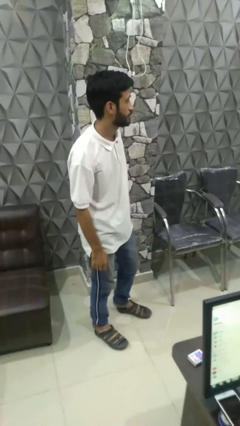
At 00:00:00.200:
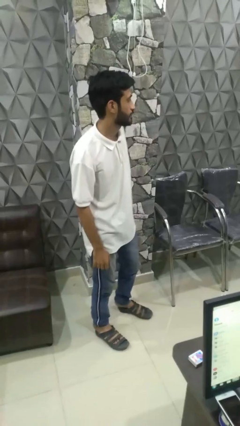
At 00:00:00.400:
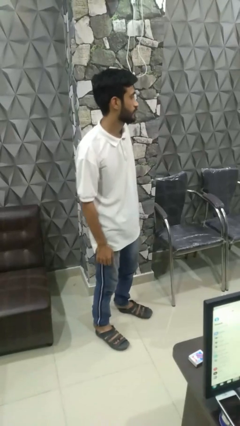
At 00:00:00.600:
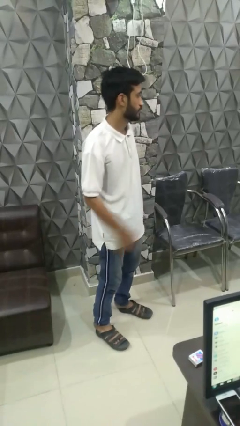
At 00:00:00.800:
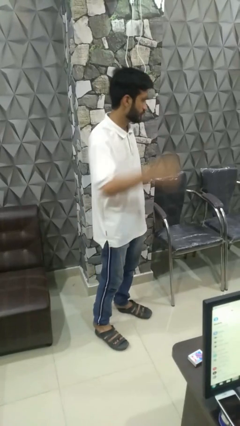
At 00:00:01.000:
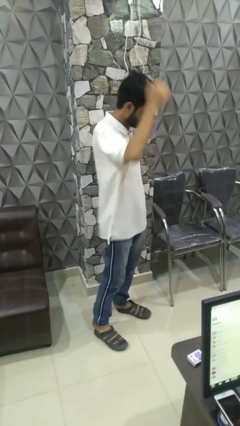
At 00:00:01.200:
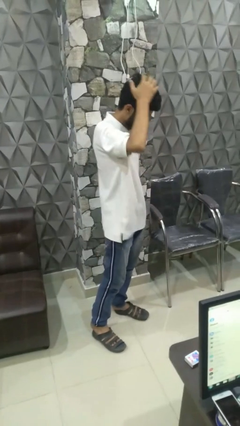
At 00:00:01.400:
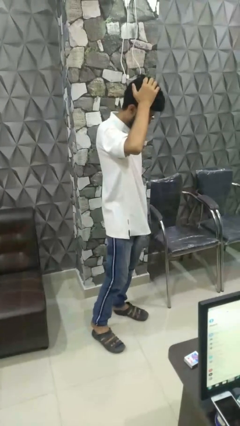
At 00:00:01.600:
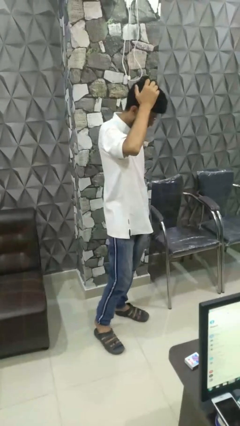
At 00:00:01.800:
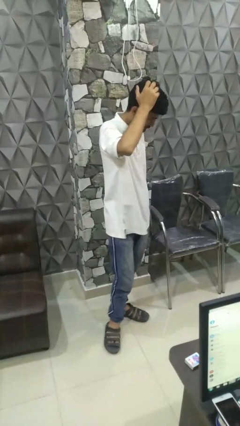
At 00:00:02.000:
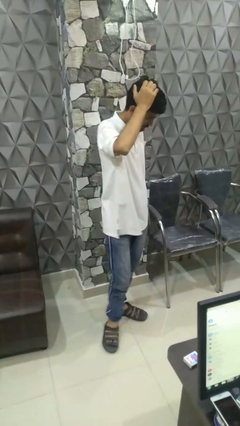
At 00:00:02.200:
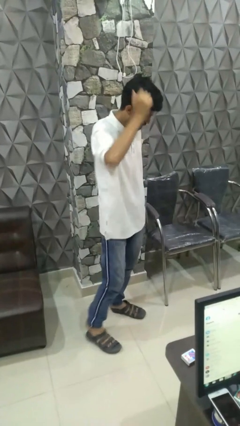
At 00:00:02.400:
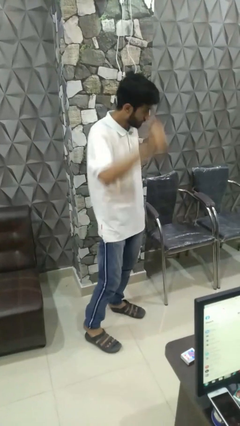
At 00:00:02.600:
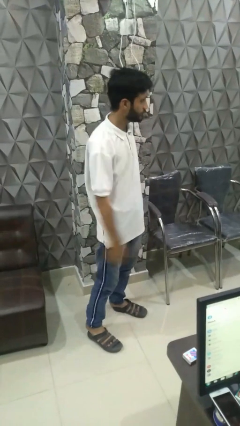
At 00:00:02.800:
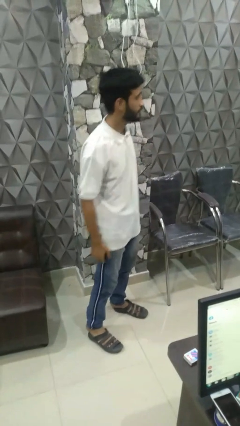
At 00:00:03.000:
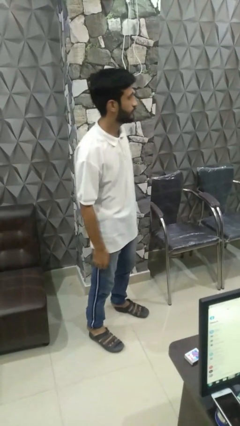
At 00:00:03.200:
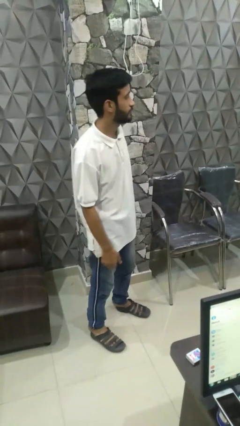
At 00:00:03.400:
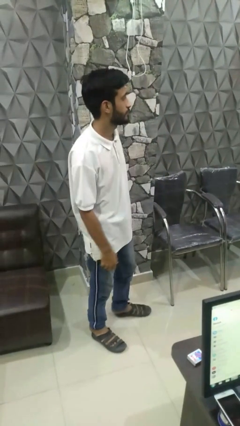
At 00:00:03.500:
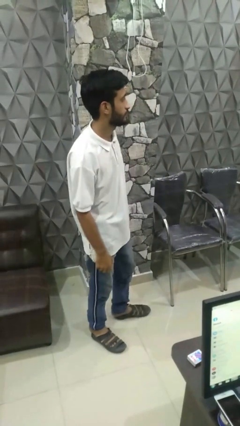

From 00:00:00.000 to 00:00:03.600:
person scratches face

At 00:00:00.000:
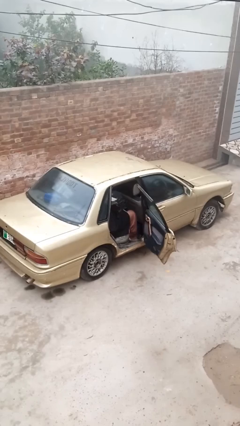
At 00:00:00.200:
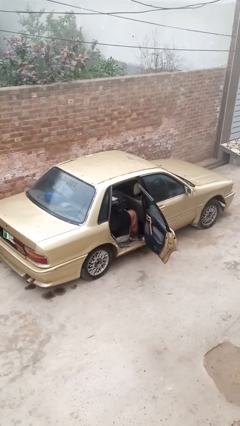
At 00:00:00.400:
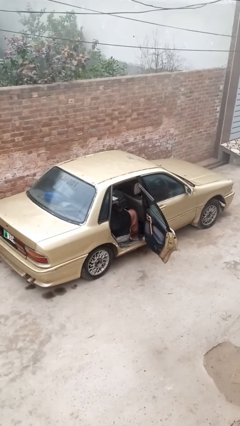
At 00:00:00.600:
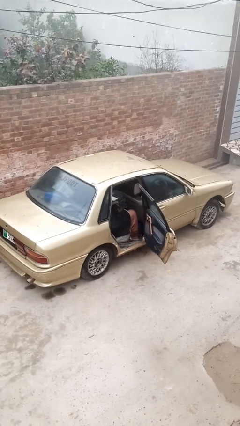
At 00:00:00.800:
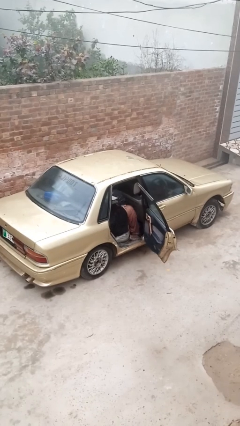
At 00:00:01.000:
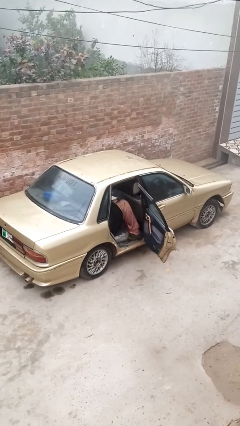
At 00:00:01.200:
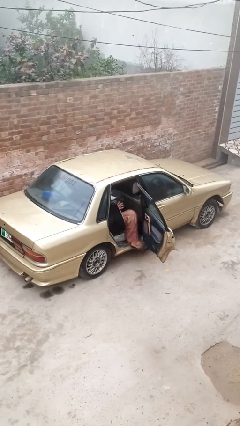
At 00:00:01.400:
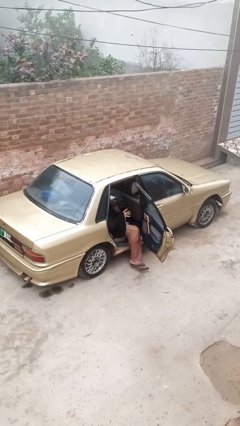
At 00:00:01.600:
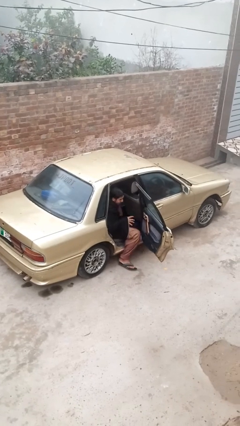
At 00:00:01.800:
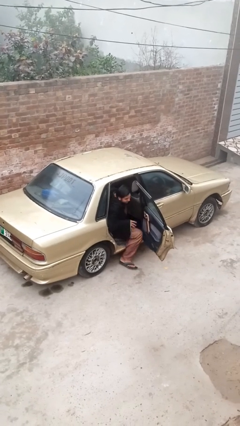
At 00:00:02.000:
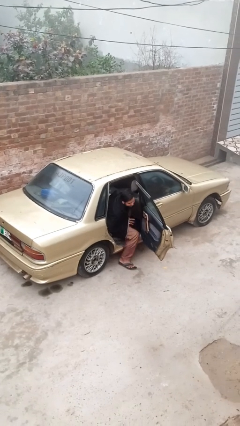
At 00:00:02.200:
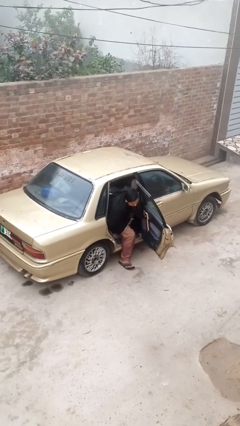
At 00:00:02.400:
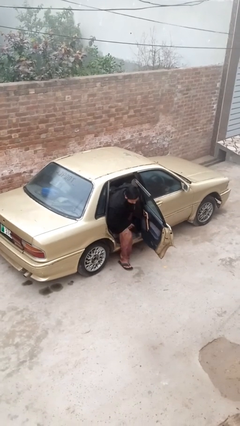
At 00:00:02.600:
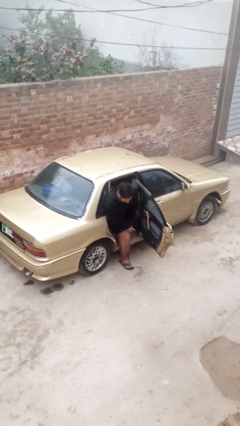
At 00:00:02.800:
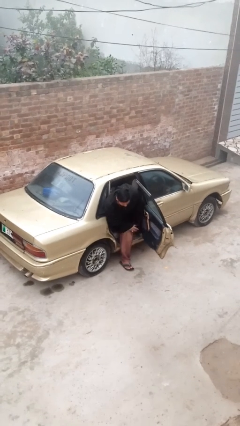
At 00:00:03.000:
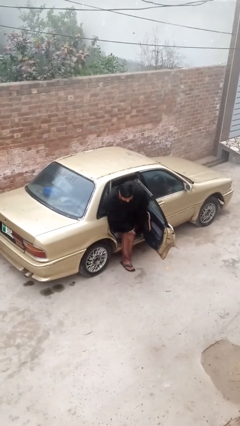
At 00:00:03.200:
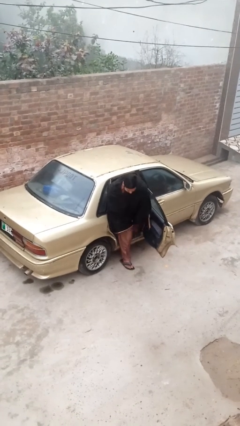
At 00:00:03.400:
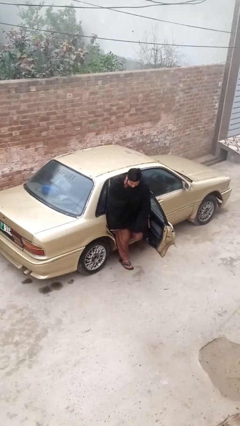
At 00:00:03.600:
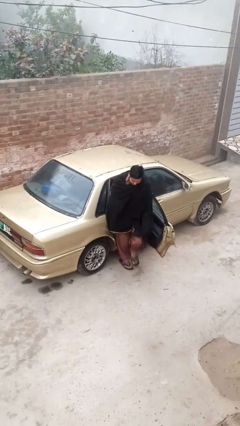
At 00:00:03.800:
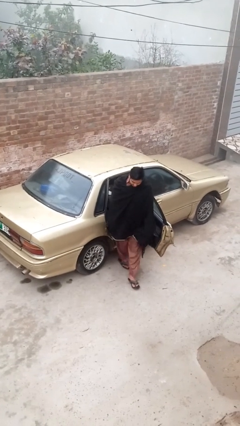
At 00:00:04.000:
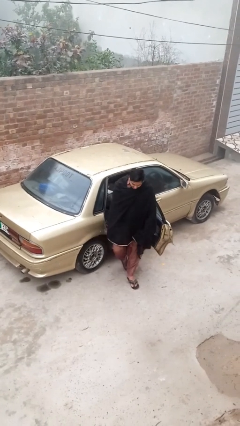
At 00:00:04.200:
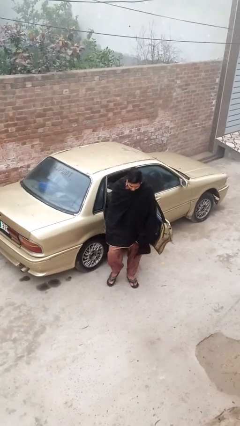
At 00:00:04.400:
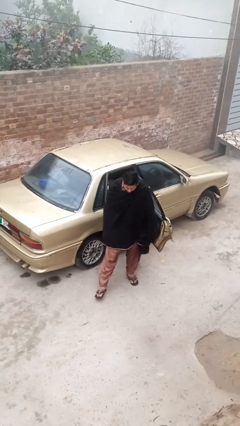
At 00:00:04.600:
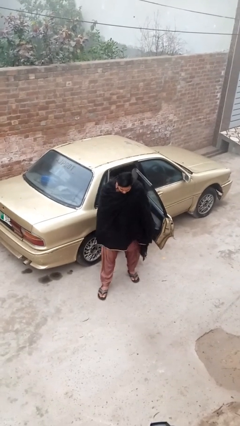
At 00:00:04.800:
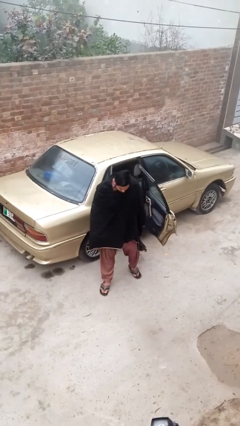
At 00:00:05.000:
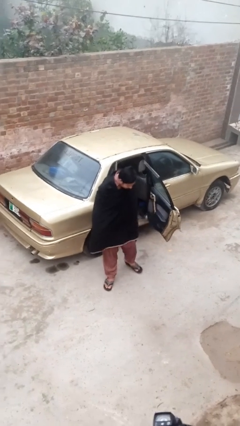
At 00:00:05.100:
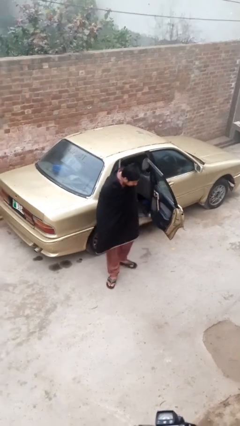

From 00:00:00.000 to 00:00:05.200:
person exits car

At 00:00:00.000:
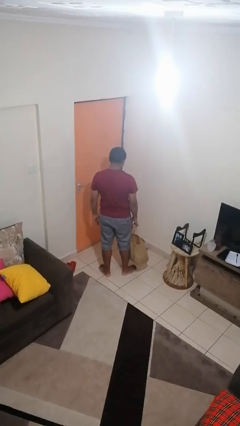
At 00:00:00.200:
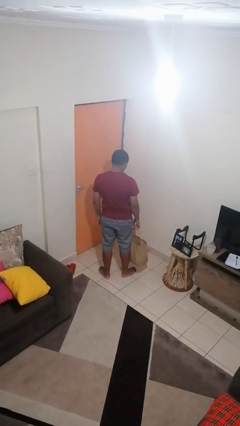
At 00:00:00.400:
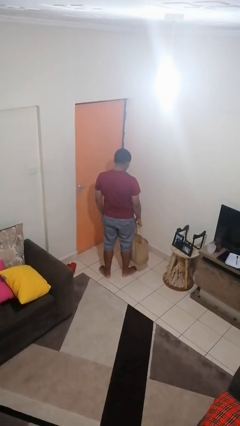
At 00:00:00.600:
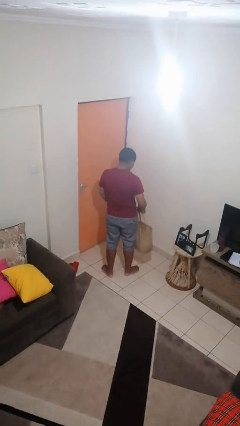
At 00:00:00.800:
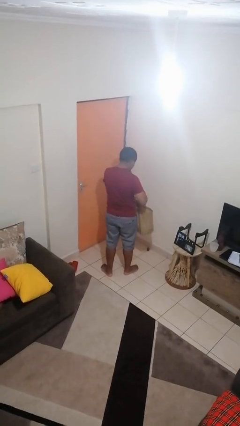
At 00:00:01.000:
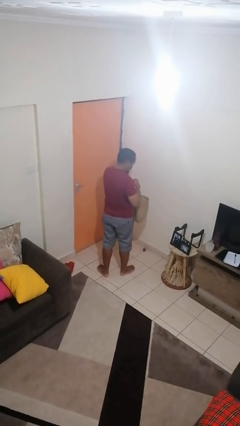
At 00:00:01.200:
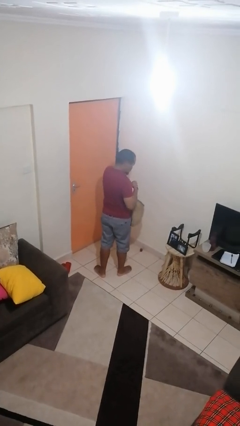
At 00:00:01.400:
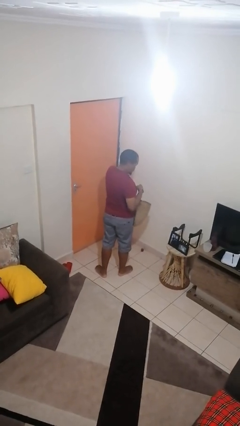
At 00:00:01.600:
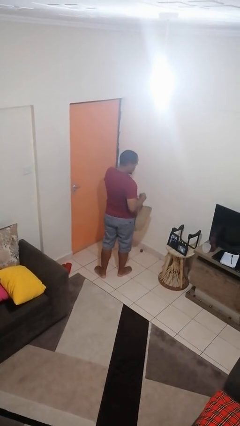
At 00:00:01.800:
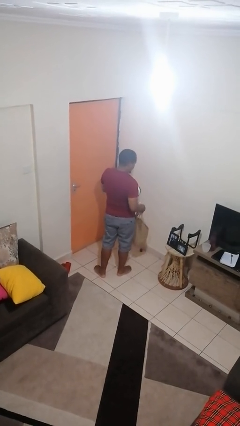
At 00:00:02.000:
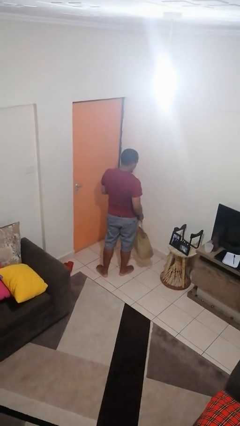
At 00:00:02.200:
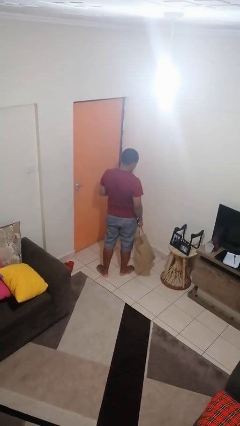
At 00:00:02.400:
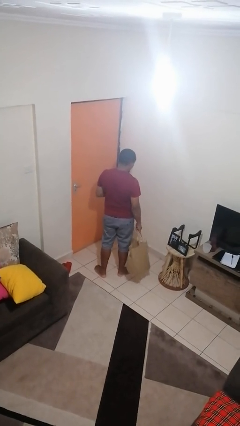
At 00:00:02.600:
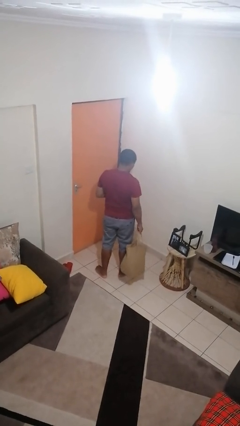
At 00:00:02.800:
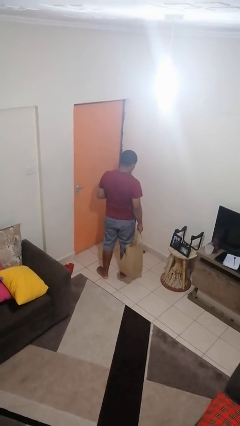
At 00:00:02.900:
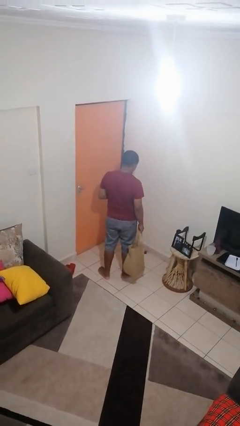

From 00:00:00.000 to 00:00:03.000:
person takes object from bag

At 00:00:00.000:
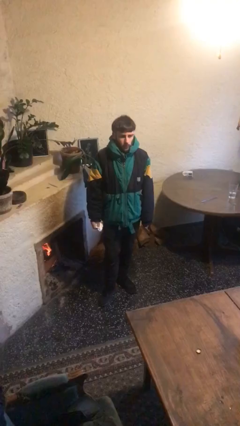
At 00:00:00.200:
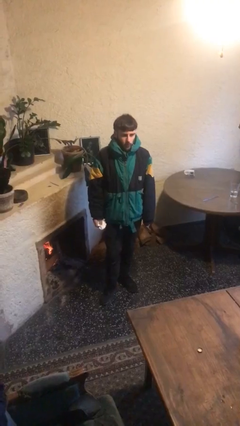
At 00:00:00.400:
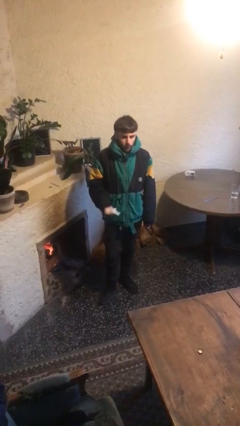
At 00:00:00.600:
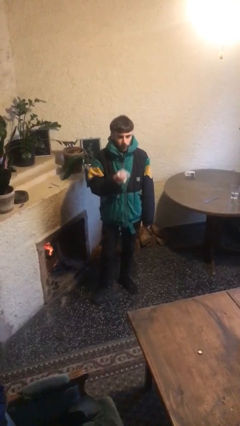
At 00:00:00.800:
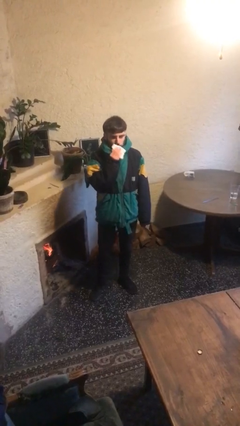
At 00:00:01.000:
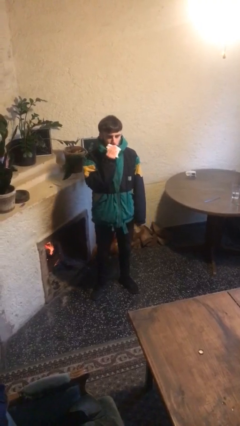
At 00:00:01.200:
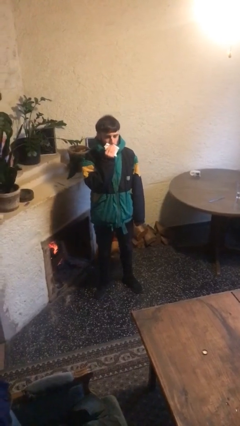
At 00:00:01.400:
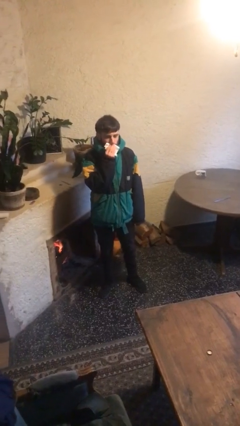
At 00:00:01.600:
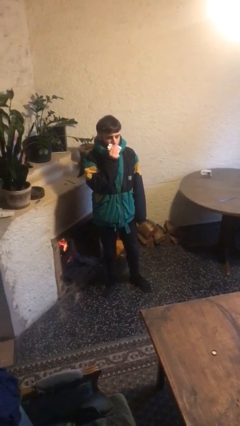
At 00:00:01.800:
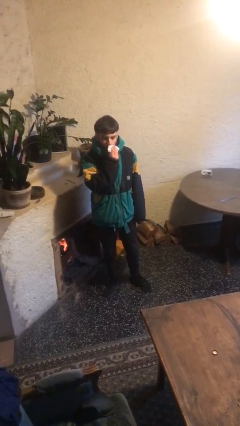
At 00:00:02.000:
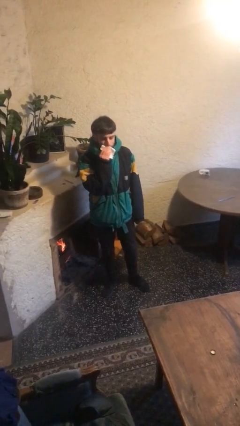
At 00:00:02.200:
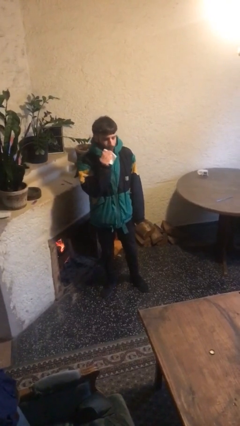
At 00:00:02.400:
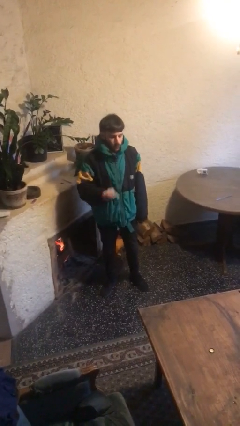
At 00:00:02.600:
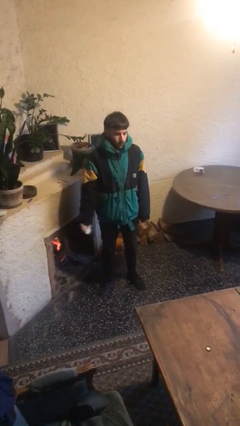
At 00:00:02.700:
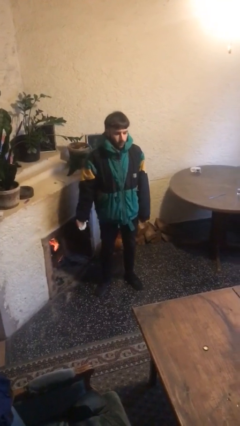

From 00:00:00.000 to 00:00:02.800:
person wipes mouth with napkin

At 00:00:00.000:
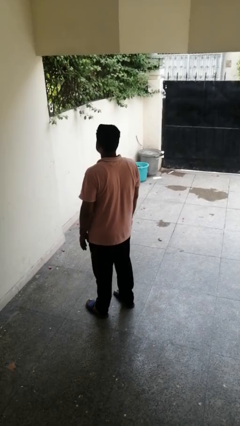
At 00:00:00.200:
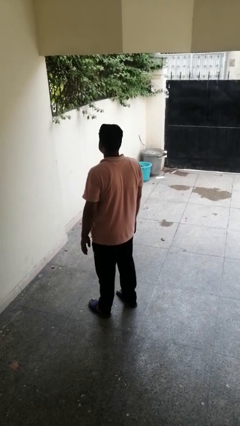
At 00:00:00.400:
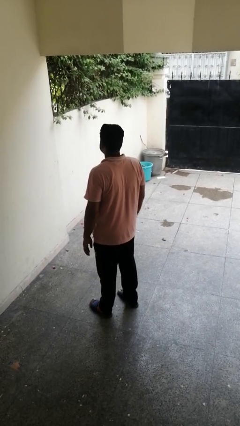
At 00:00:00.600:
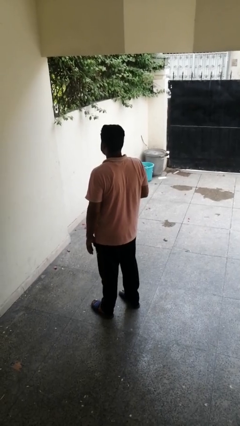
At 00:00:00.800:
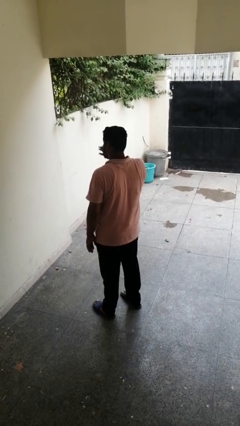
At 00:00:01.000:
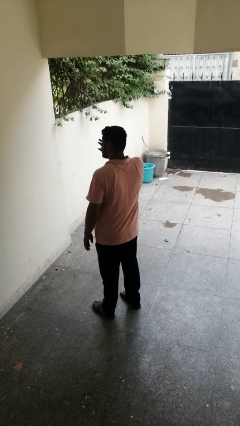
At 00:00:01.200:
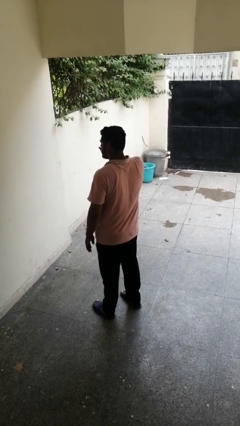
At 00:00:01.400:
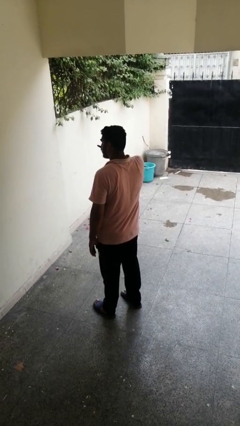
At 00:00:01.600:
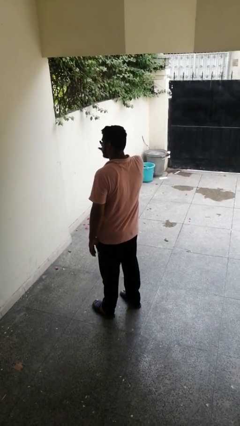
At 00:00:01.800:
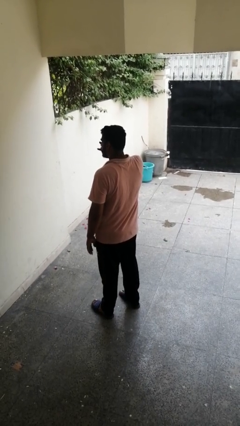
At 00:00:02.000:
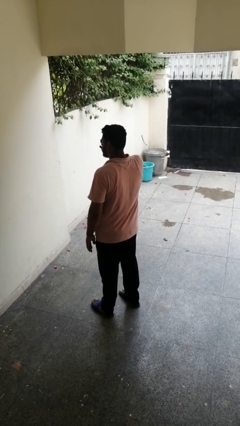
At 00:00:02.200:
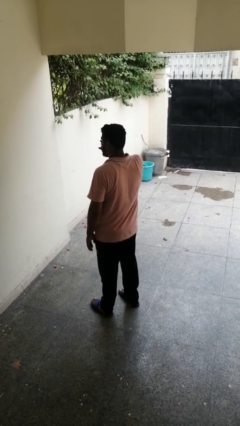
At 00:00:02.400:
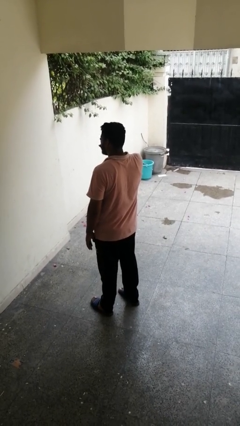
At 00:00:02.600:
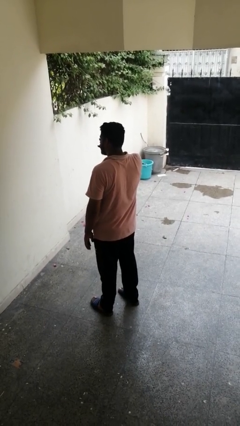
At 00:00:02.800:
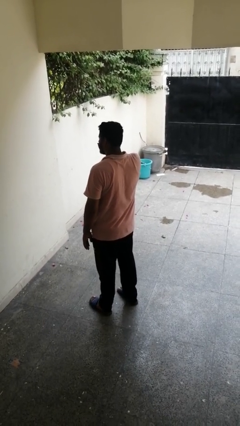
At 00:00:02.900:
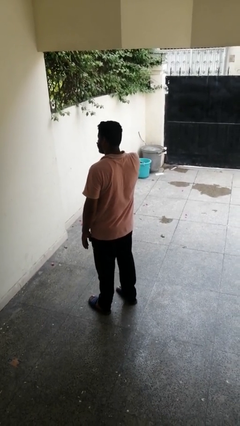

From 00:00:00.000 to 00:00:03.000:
person rubs eyes
